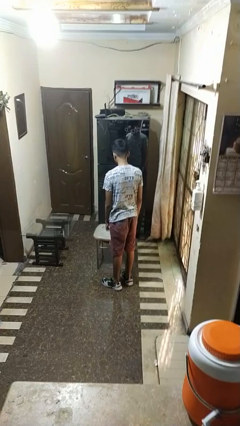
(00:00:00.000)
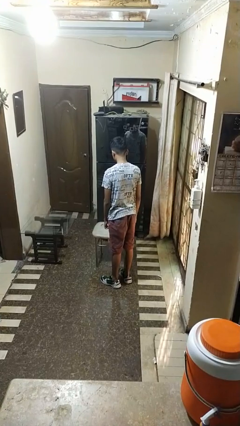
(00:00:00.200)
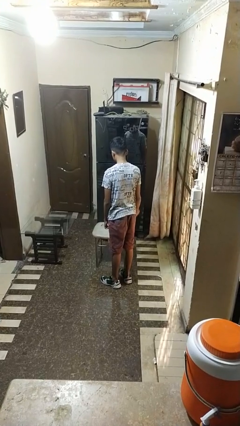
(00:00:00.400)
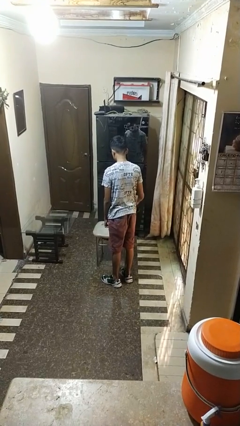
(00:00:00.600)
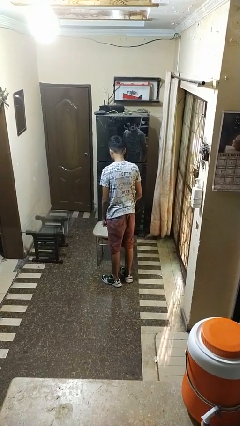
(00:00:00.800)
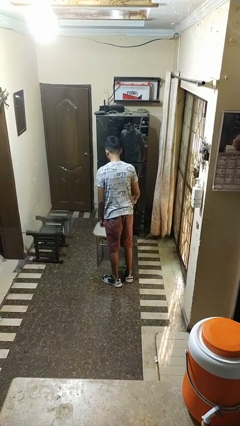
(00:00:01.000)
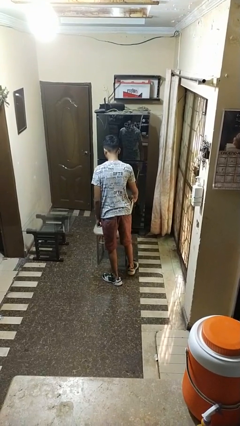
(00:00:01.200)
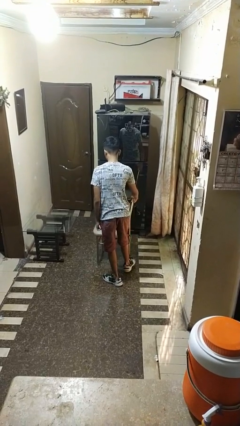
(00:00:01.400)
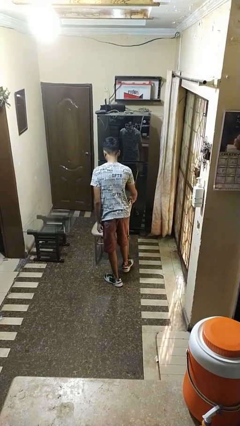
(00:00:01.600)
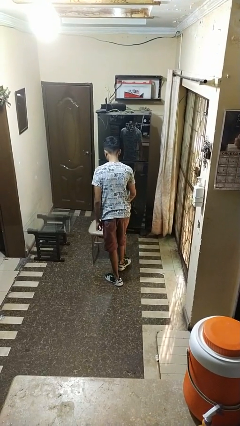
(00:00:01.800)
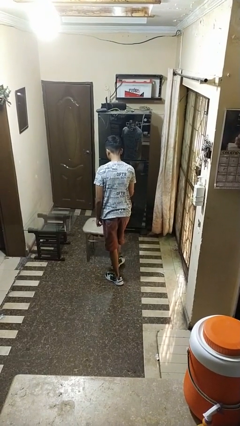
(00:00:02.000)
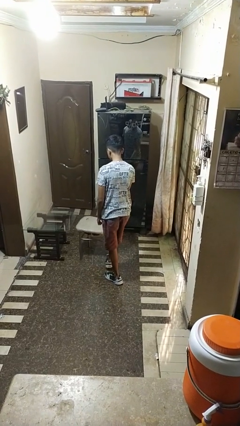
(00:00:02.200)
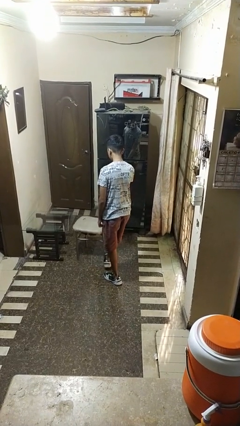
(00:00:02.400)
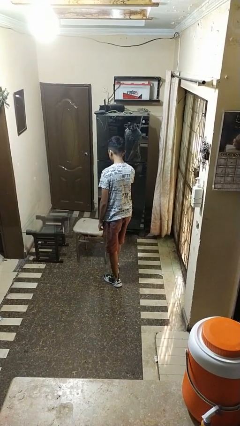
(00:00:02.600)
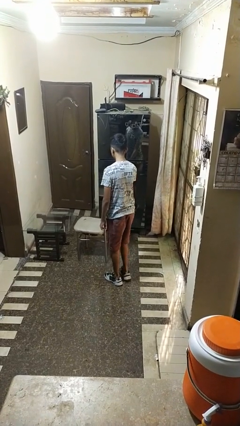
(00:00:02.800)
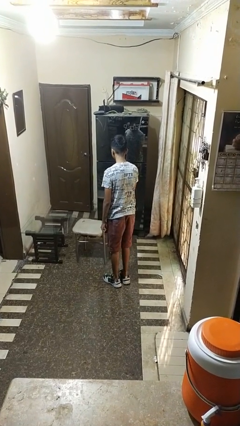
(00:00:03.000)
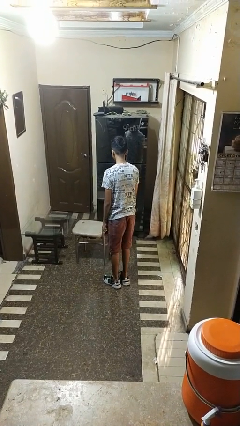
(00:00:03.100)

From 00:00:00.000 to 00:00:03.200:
person pushes in chair

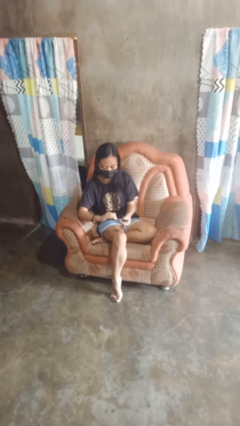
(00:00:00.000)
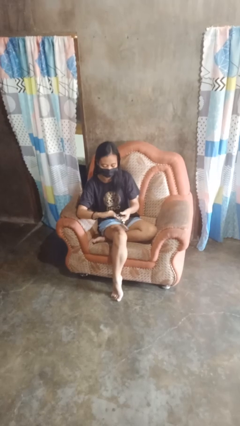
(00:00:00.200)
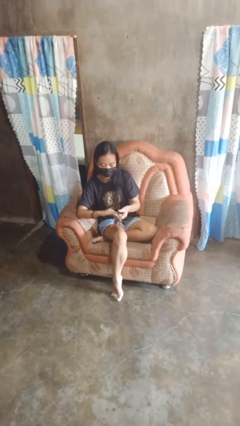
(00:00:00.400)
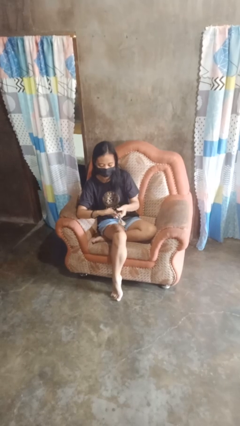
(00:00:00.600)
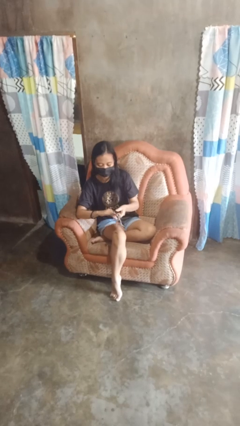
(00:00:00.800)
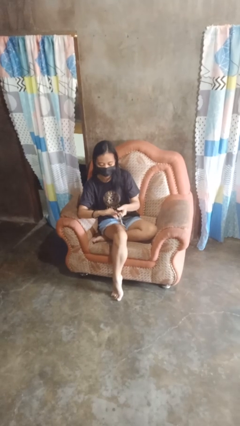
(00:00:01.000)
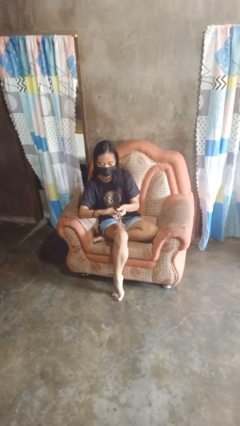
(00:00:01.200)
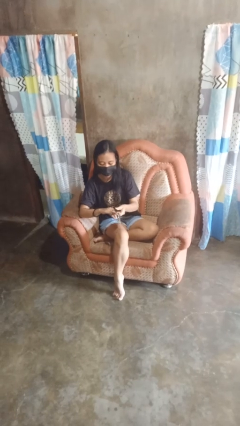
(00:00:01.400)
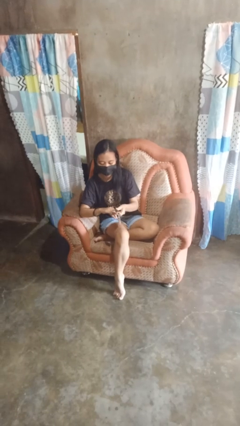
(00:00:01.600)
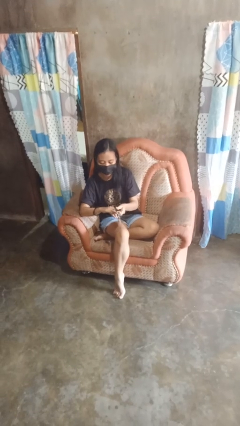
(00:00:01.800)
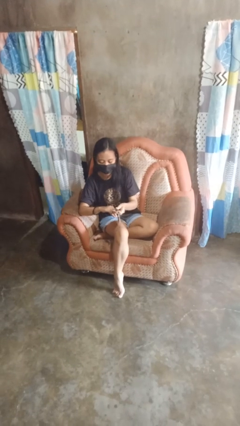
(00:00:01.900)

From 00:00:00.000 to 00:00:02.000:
person clips fingernails

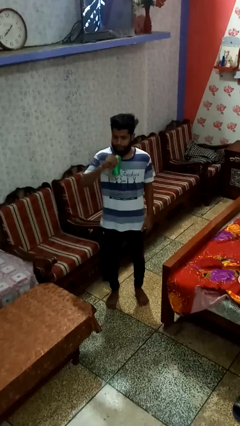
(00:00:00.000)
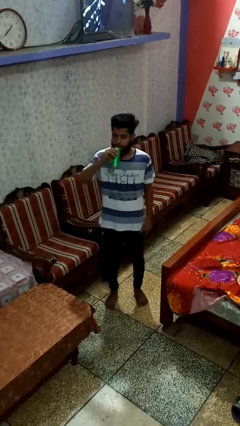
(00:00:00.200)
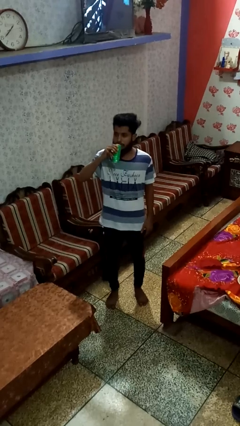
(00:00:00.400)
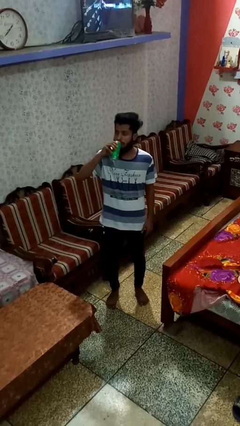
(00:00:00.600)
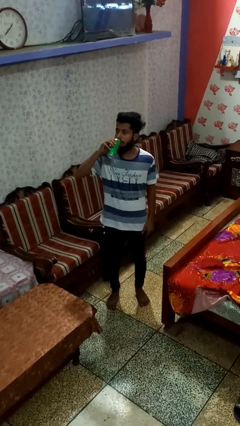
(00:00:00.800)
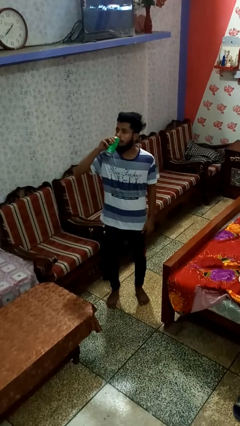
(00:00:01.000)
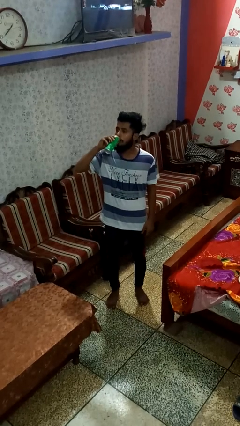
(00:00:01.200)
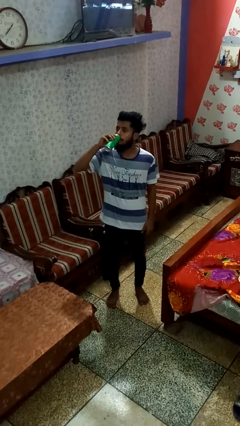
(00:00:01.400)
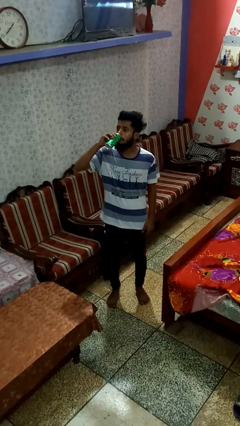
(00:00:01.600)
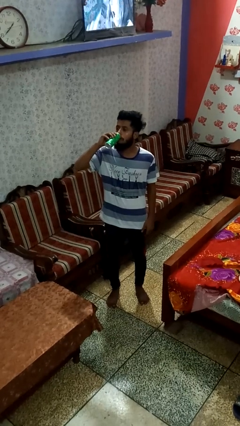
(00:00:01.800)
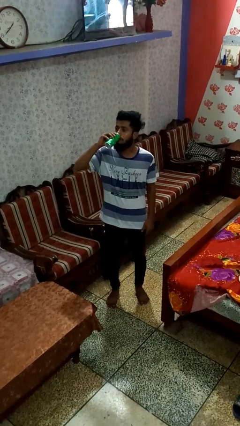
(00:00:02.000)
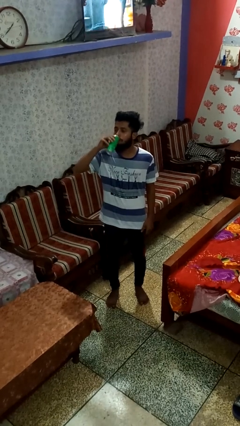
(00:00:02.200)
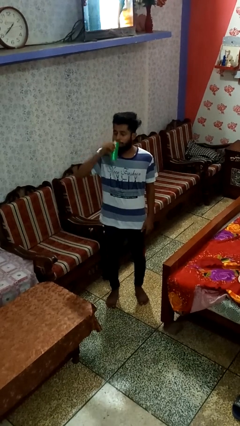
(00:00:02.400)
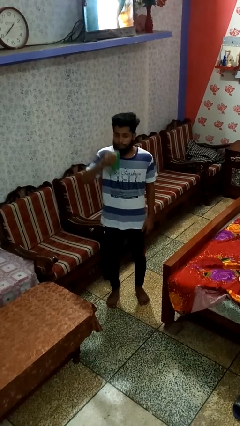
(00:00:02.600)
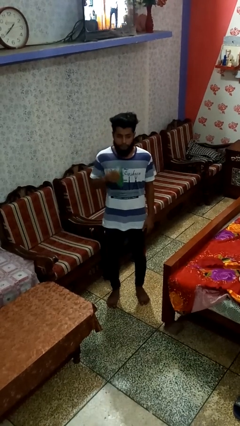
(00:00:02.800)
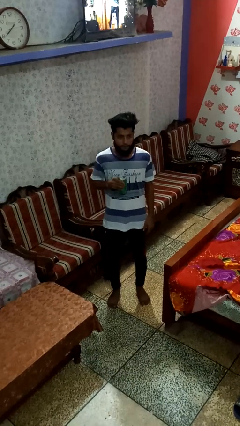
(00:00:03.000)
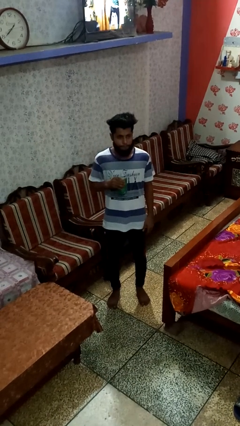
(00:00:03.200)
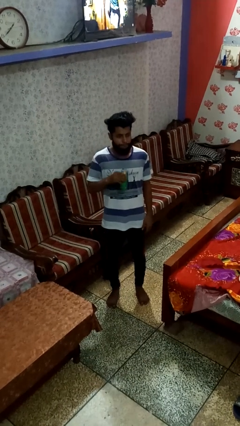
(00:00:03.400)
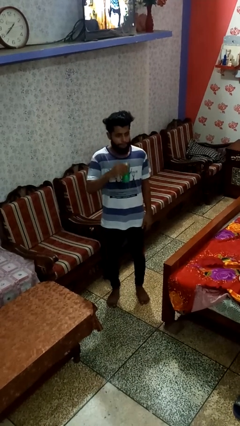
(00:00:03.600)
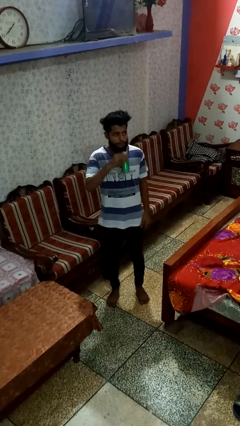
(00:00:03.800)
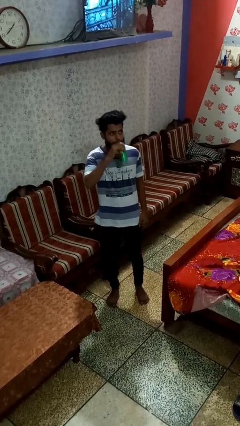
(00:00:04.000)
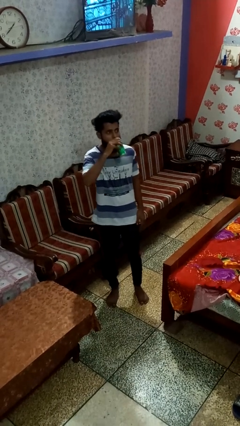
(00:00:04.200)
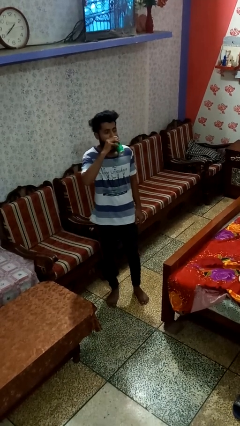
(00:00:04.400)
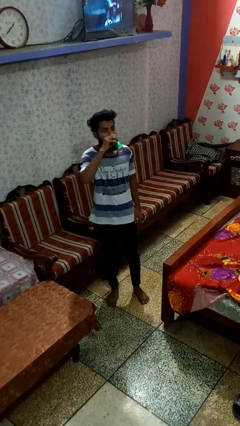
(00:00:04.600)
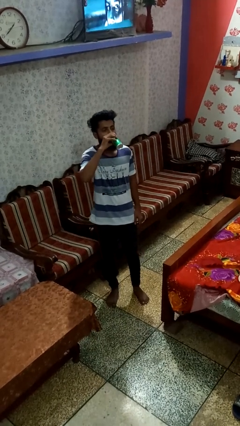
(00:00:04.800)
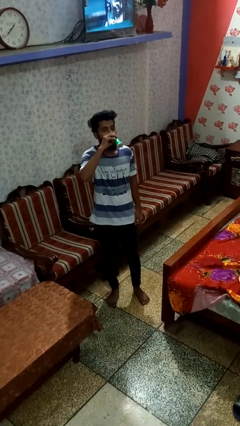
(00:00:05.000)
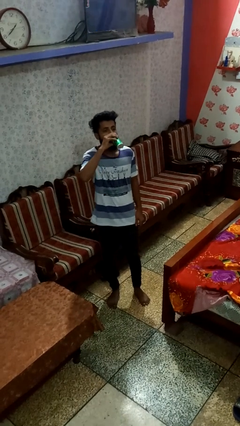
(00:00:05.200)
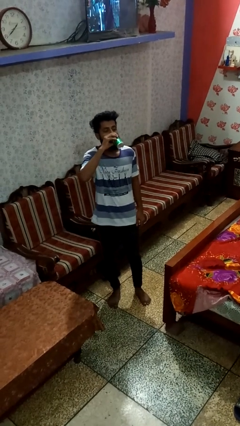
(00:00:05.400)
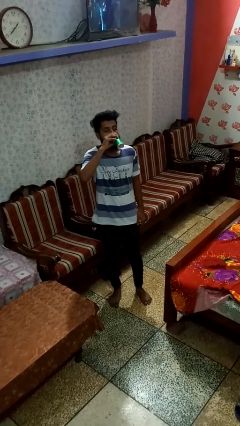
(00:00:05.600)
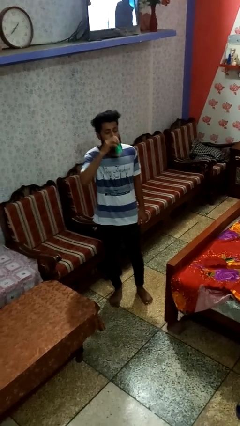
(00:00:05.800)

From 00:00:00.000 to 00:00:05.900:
person drinks from beverage can

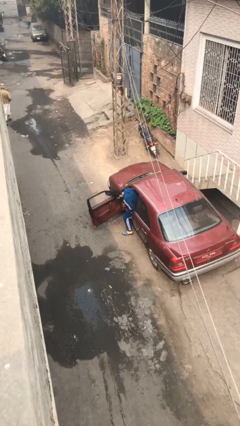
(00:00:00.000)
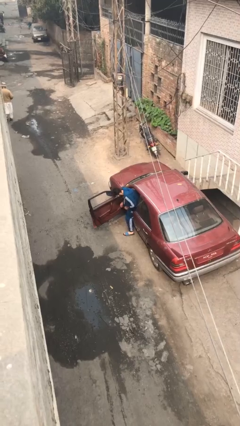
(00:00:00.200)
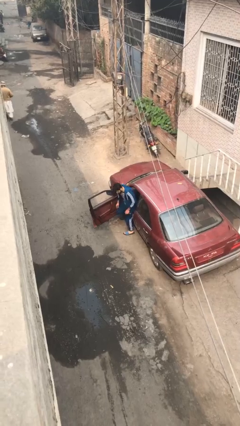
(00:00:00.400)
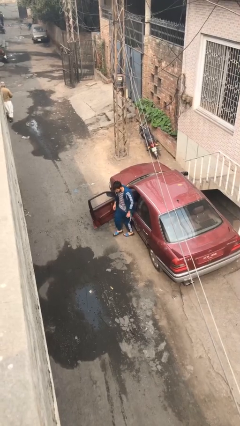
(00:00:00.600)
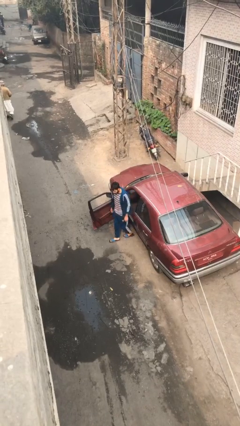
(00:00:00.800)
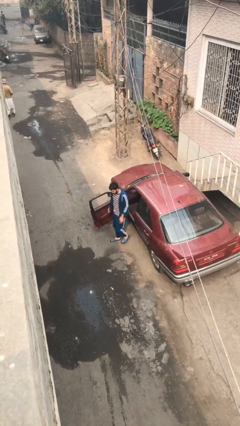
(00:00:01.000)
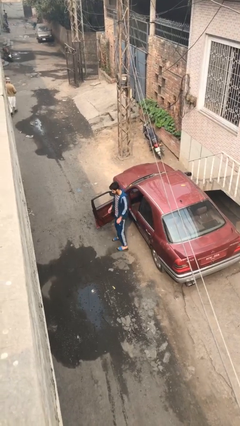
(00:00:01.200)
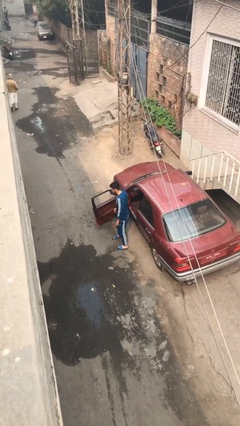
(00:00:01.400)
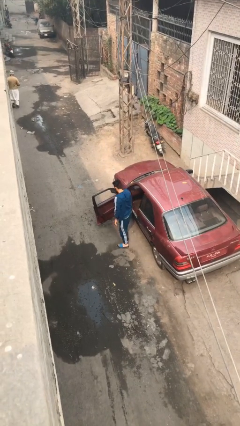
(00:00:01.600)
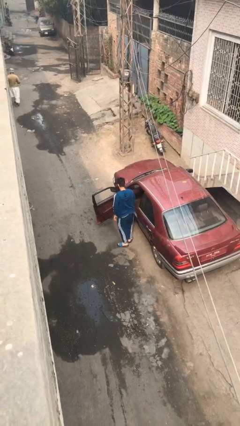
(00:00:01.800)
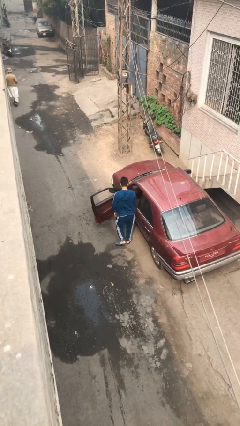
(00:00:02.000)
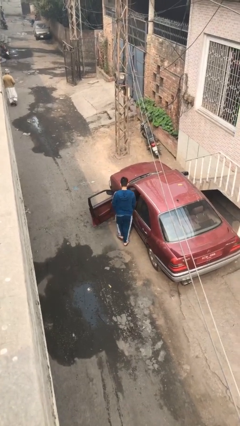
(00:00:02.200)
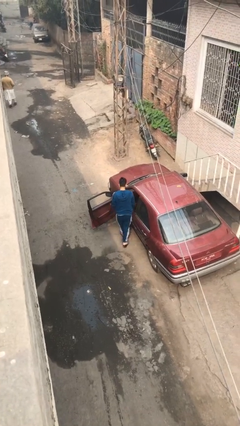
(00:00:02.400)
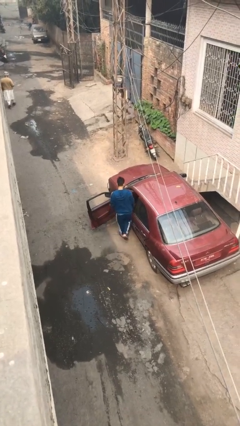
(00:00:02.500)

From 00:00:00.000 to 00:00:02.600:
person exits car

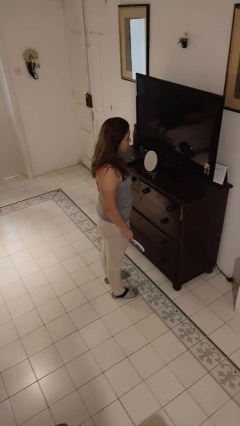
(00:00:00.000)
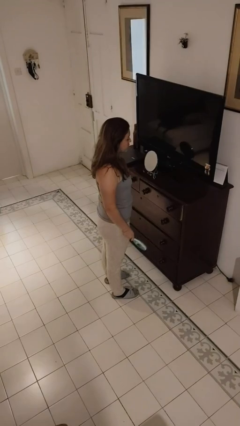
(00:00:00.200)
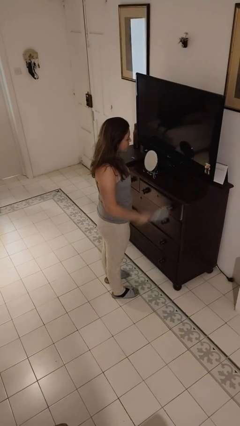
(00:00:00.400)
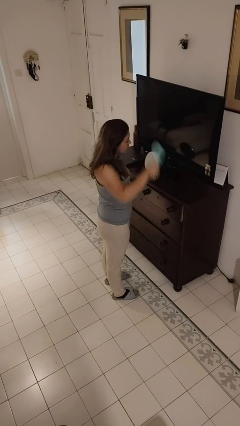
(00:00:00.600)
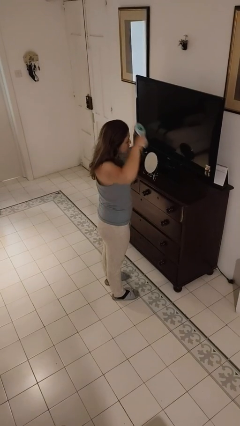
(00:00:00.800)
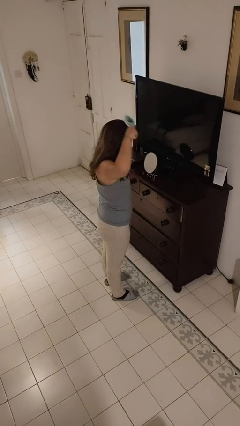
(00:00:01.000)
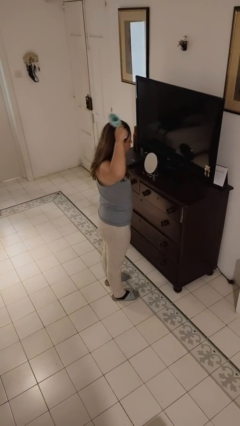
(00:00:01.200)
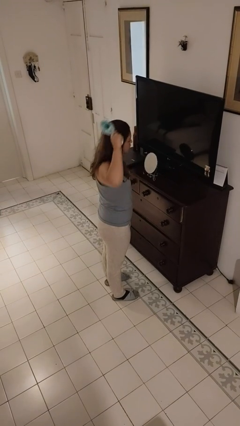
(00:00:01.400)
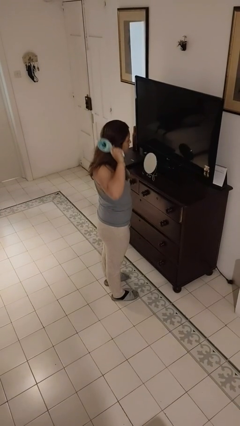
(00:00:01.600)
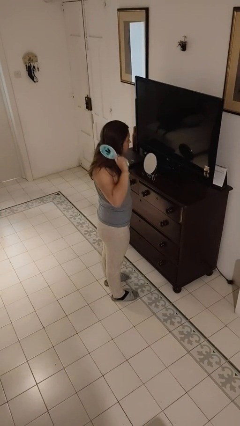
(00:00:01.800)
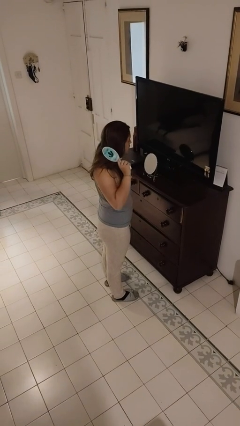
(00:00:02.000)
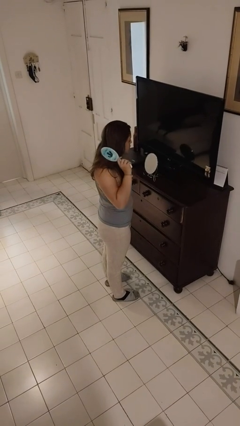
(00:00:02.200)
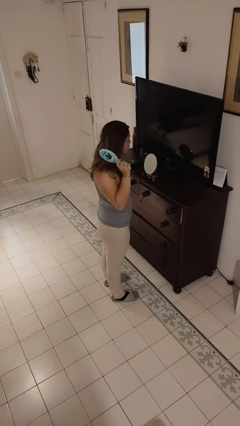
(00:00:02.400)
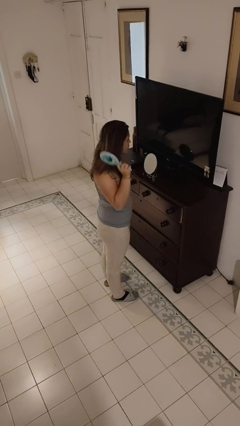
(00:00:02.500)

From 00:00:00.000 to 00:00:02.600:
person brushes hair

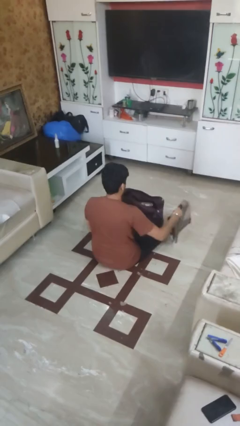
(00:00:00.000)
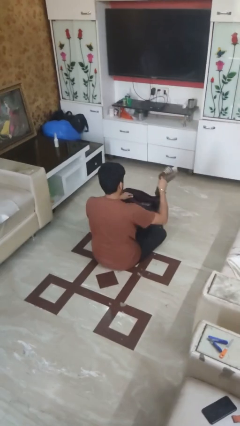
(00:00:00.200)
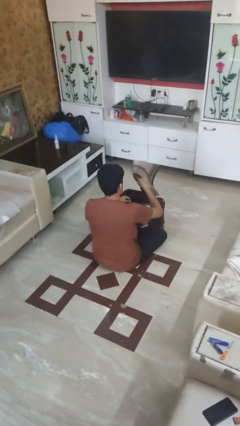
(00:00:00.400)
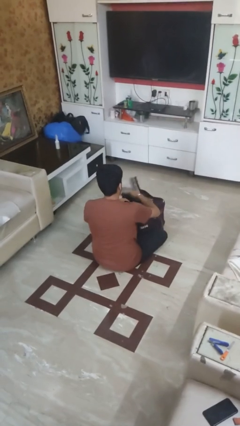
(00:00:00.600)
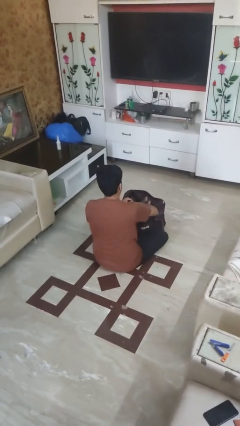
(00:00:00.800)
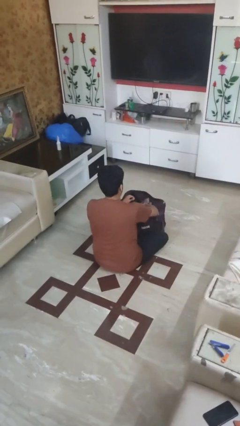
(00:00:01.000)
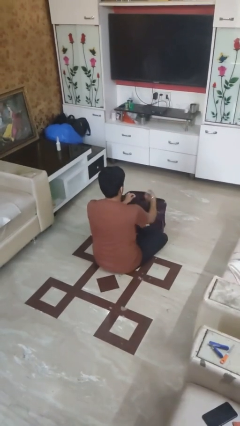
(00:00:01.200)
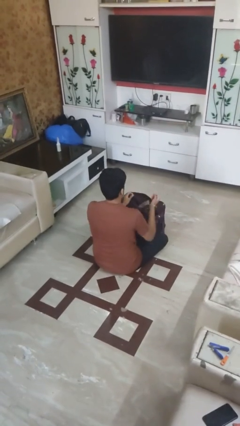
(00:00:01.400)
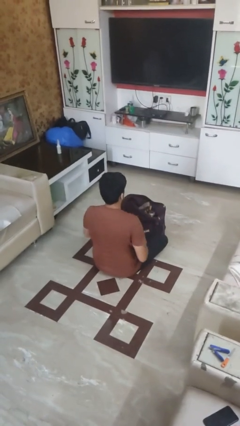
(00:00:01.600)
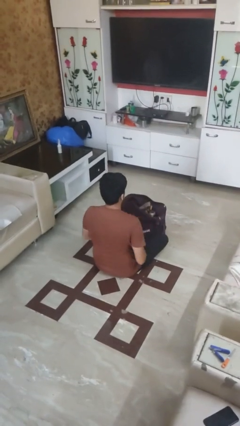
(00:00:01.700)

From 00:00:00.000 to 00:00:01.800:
person loads clothes into suitcase
